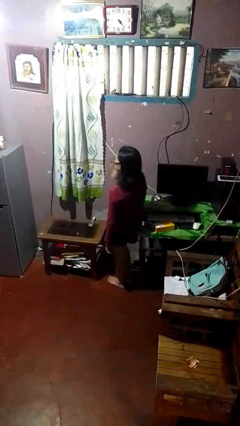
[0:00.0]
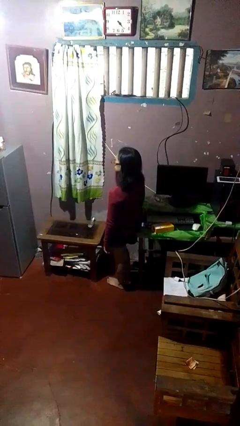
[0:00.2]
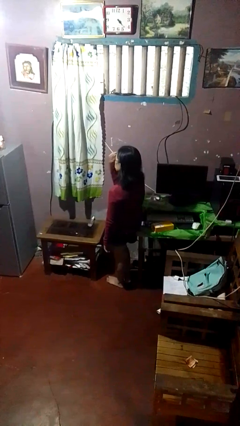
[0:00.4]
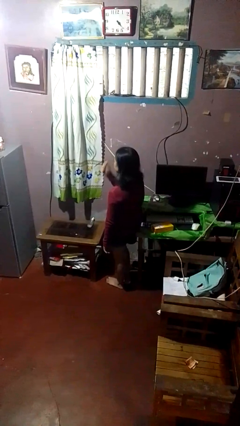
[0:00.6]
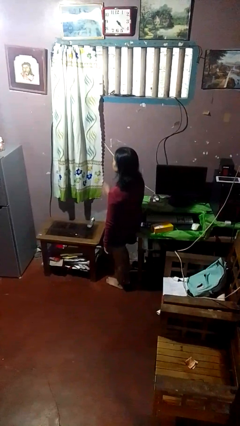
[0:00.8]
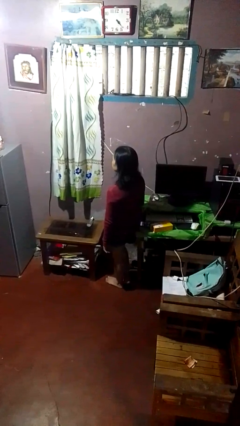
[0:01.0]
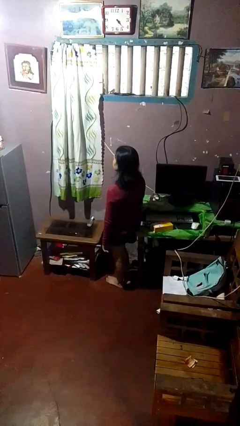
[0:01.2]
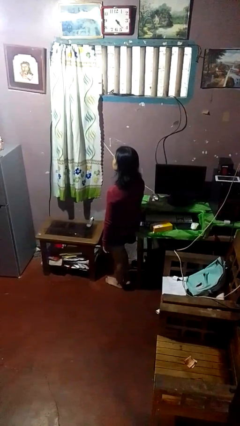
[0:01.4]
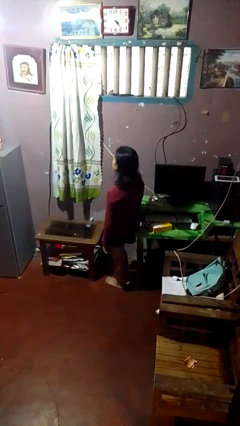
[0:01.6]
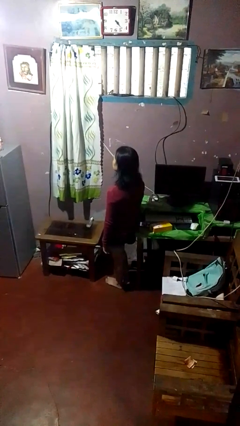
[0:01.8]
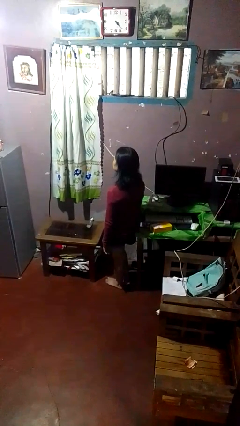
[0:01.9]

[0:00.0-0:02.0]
person takes off glasses

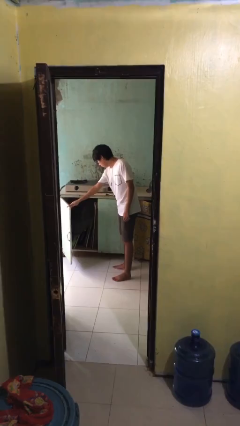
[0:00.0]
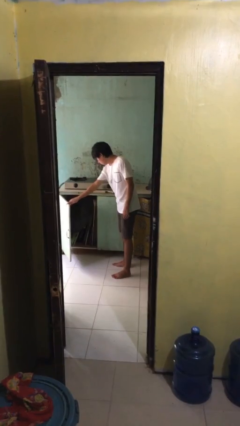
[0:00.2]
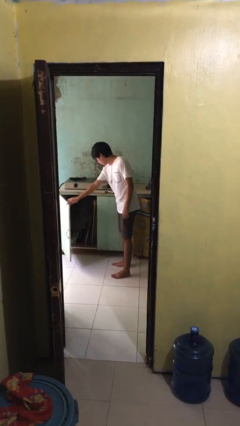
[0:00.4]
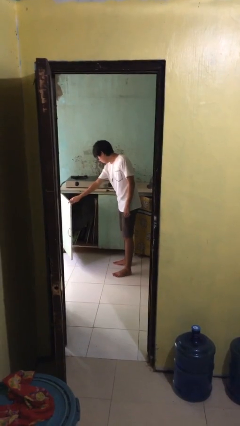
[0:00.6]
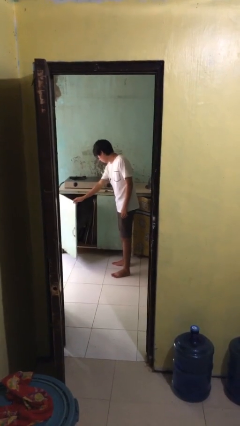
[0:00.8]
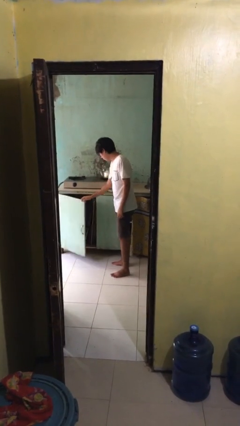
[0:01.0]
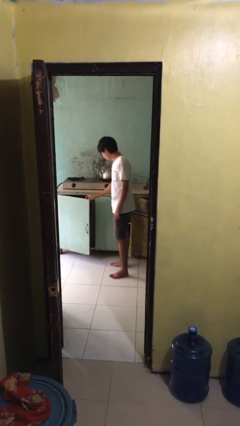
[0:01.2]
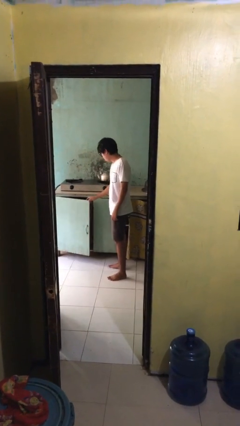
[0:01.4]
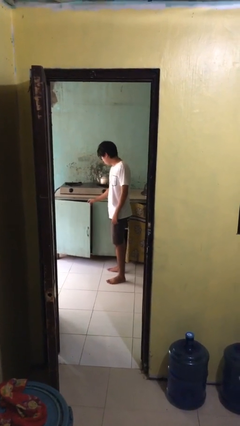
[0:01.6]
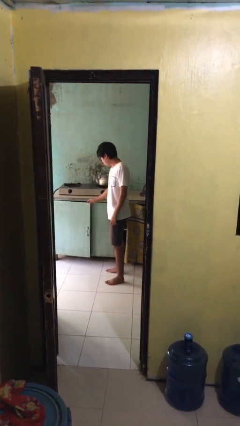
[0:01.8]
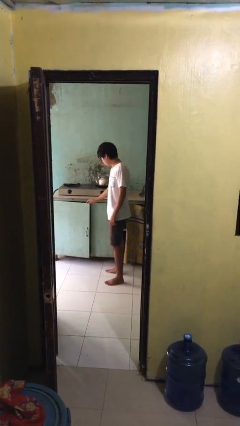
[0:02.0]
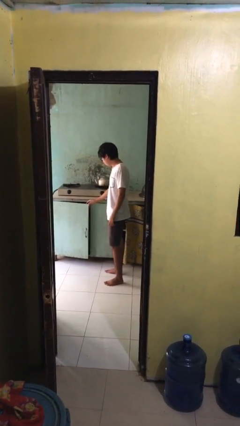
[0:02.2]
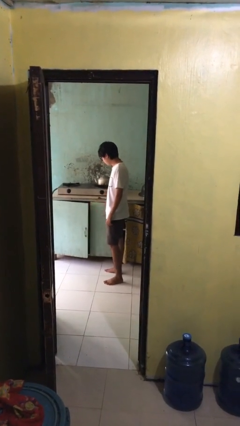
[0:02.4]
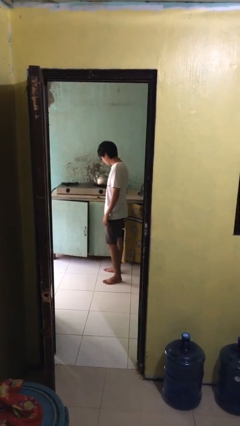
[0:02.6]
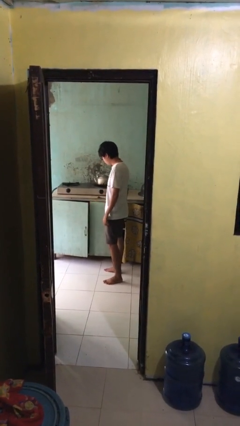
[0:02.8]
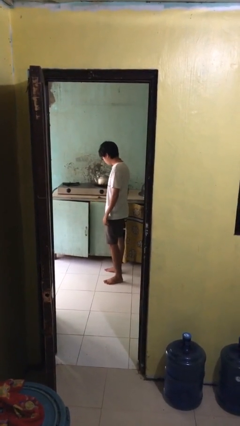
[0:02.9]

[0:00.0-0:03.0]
person closes cabinet

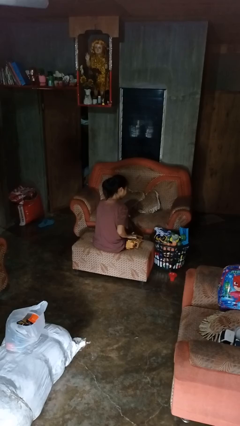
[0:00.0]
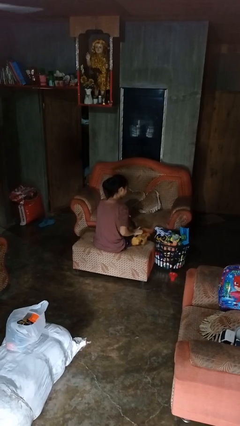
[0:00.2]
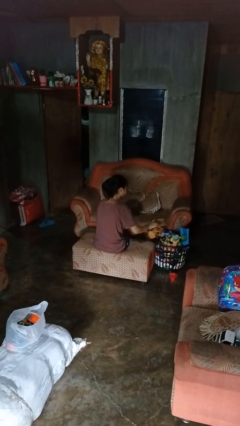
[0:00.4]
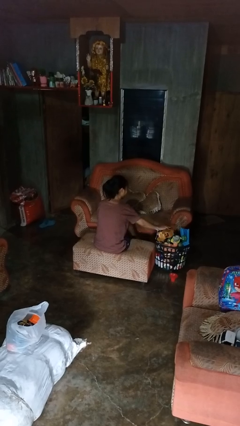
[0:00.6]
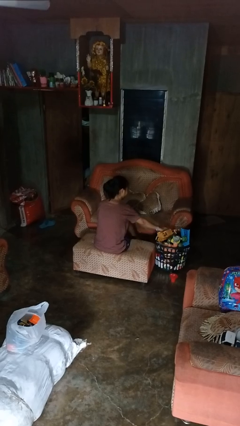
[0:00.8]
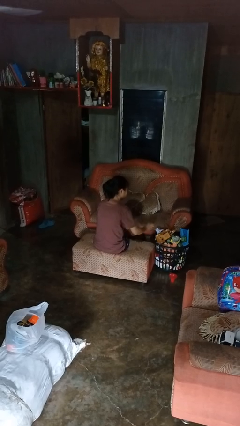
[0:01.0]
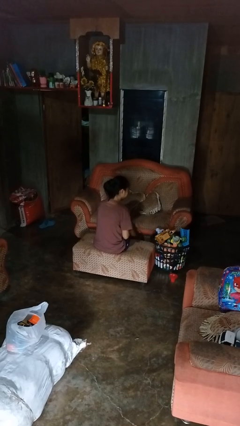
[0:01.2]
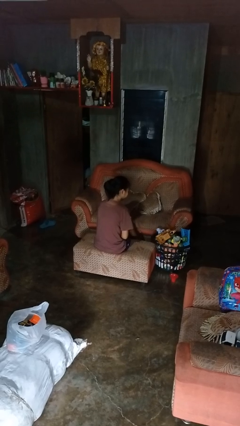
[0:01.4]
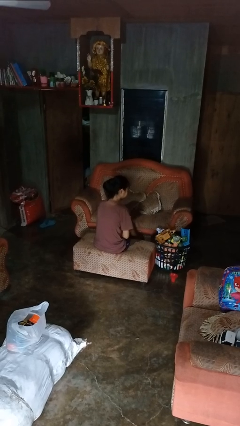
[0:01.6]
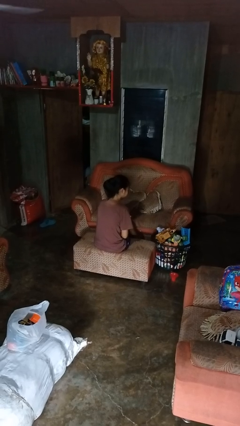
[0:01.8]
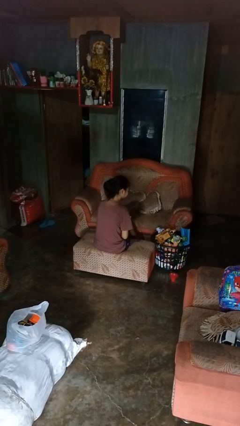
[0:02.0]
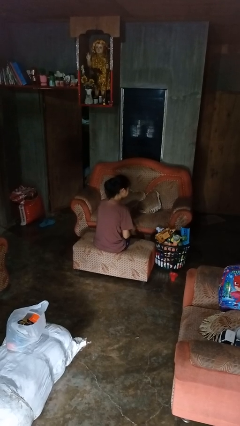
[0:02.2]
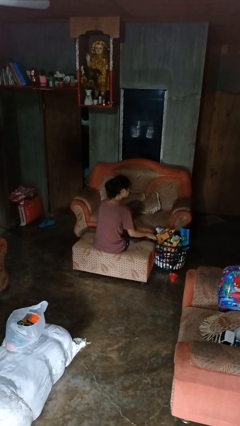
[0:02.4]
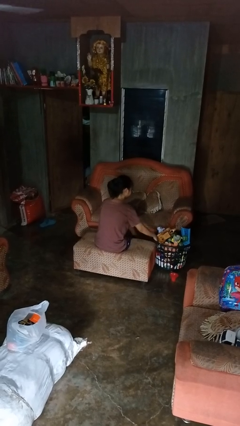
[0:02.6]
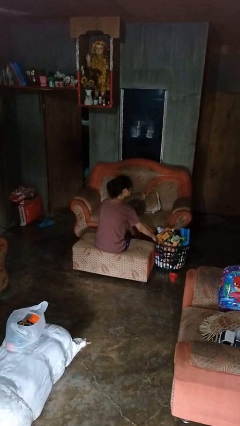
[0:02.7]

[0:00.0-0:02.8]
person puts object into basket

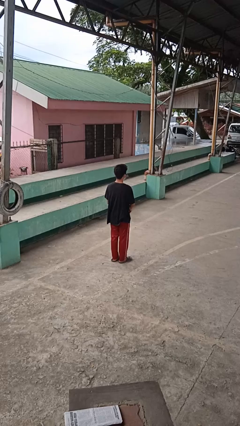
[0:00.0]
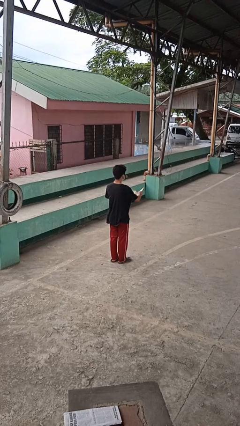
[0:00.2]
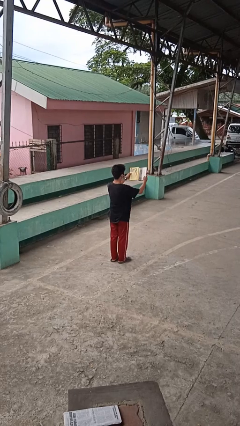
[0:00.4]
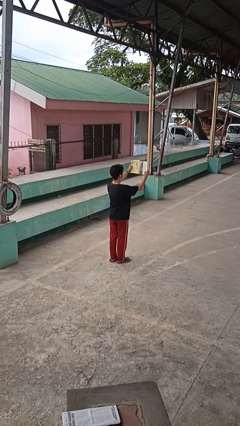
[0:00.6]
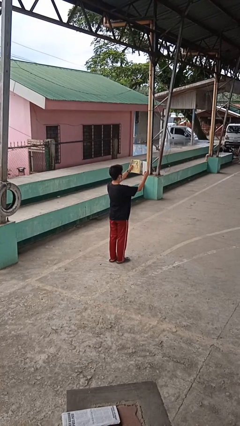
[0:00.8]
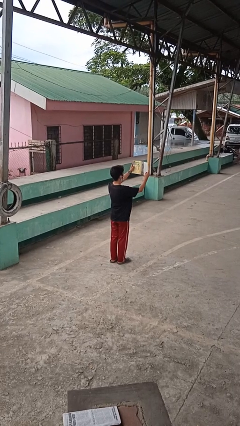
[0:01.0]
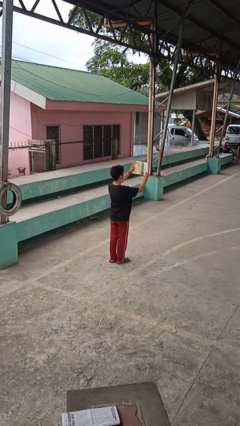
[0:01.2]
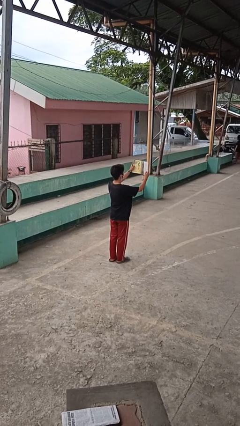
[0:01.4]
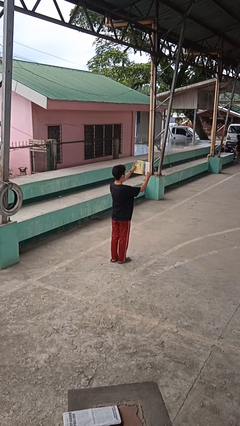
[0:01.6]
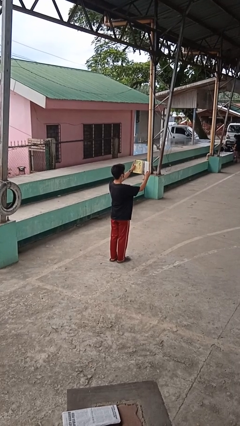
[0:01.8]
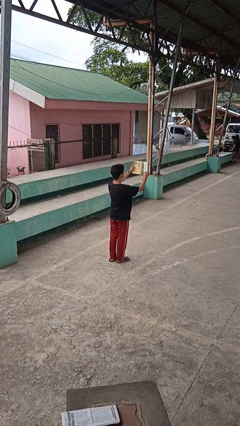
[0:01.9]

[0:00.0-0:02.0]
person reads book

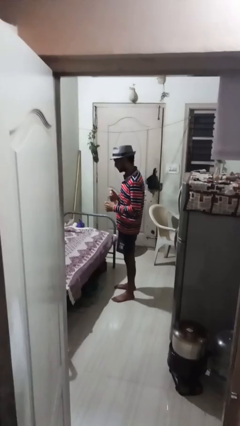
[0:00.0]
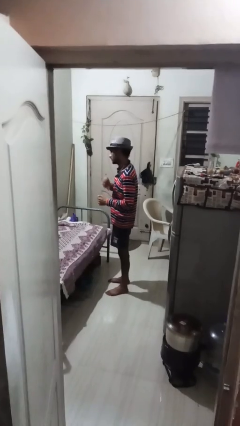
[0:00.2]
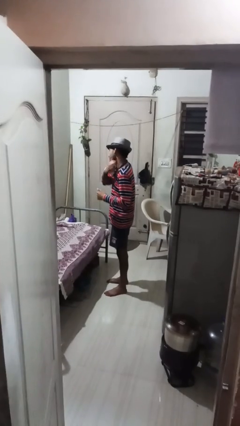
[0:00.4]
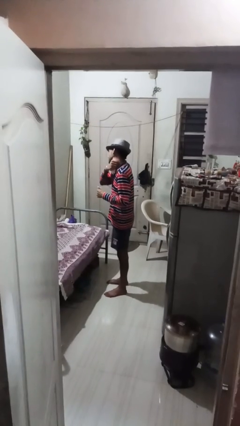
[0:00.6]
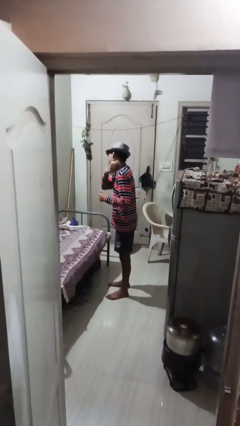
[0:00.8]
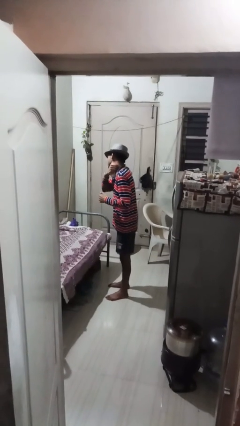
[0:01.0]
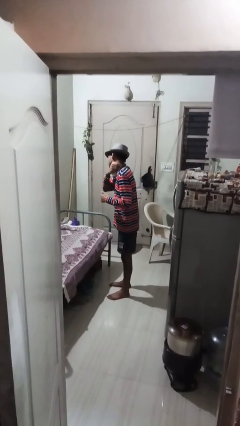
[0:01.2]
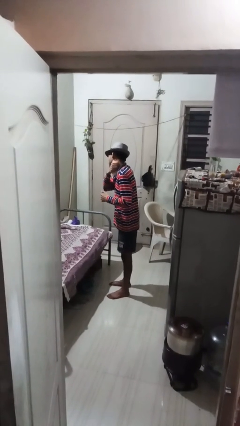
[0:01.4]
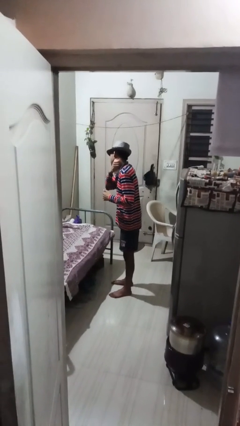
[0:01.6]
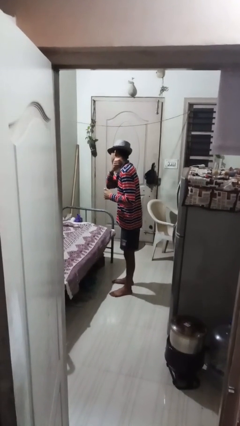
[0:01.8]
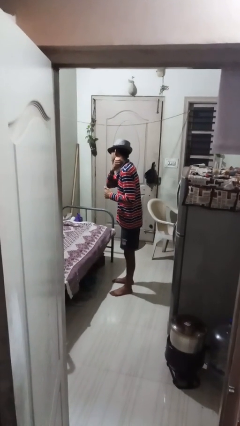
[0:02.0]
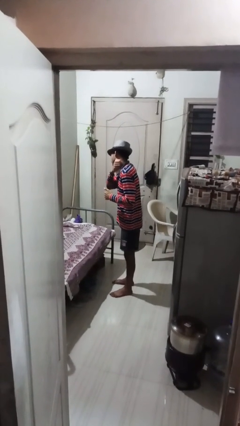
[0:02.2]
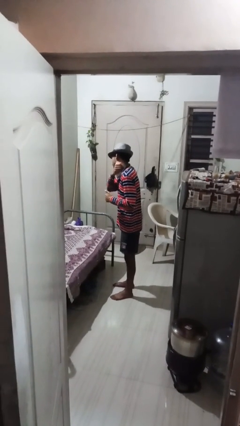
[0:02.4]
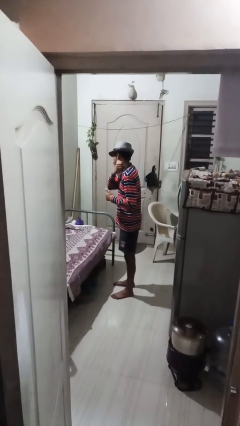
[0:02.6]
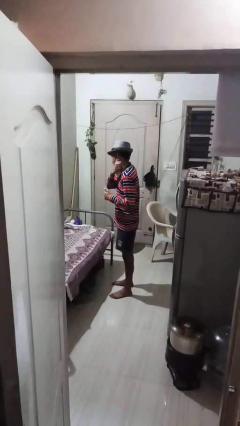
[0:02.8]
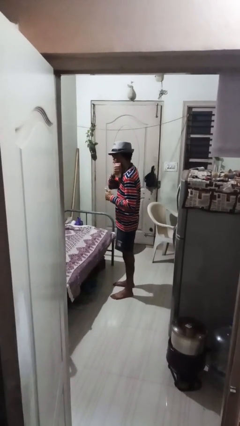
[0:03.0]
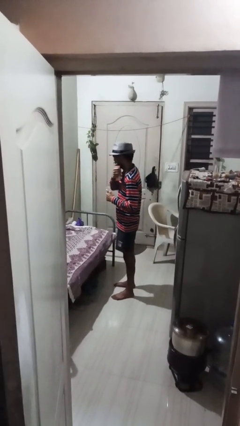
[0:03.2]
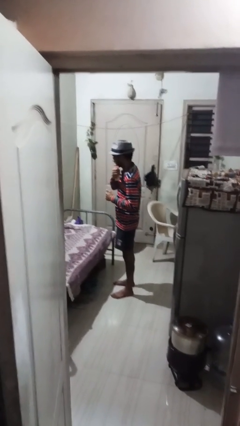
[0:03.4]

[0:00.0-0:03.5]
person applies deodorant

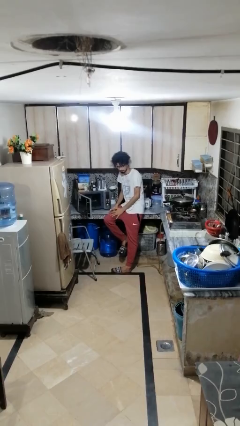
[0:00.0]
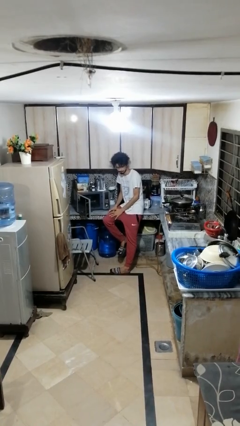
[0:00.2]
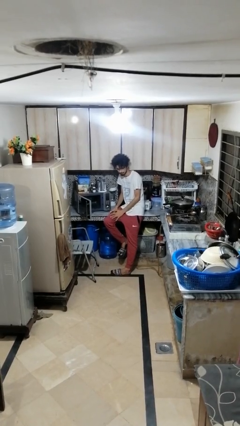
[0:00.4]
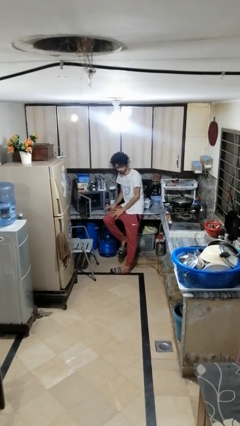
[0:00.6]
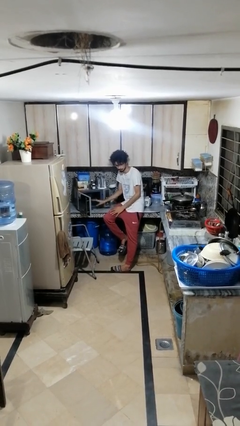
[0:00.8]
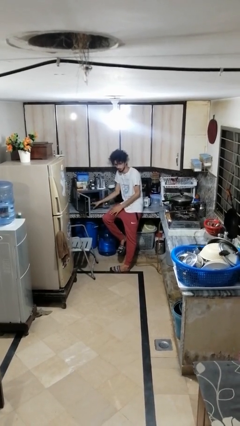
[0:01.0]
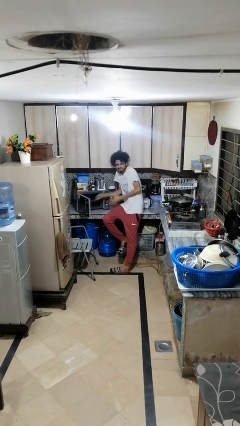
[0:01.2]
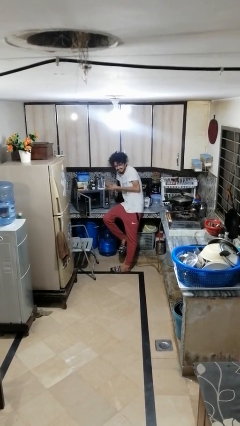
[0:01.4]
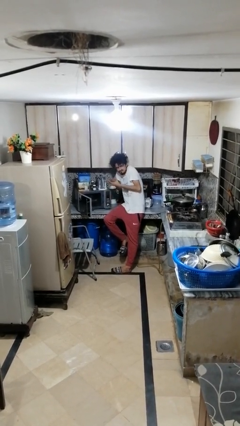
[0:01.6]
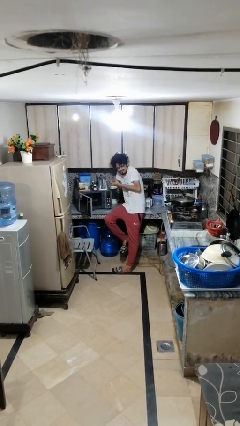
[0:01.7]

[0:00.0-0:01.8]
person burns hand

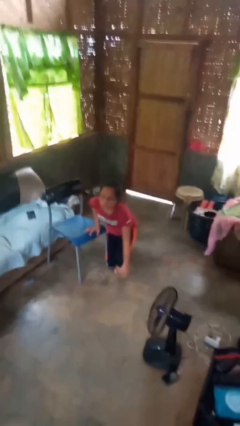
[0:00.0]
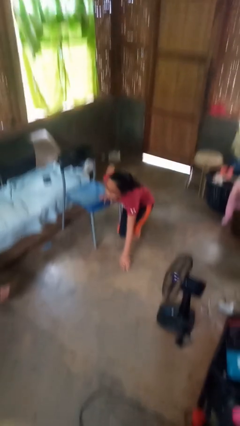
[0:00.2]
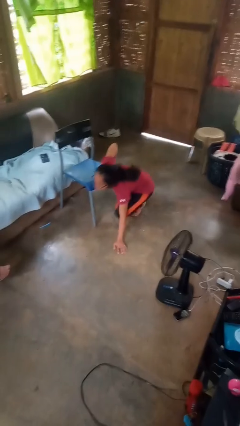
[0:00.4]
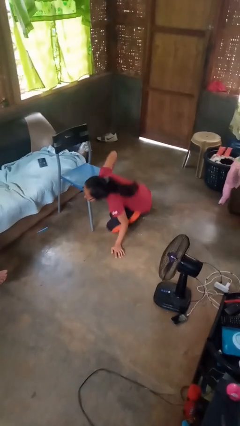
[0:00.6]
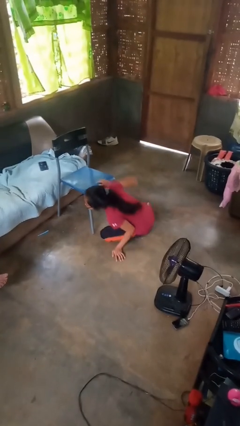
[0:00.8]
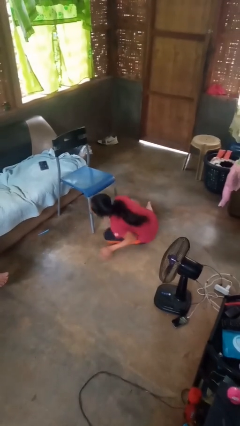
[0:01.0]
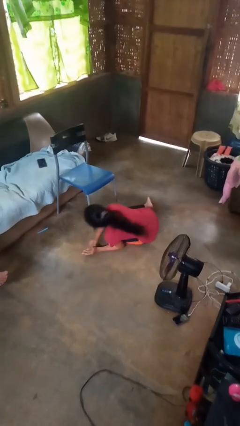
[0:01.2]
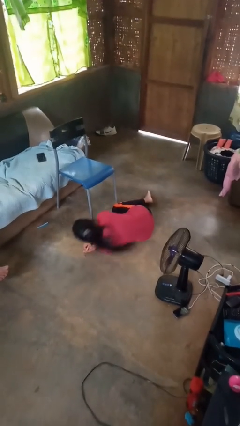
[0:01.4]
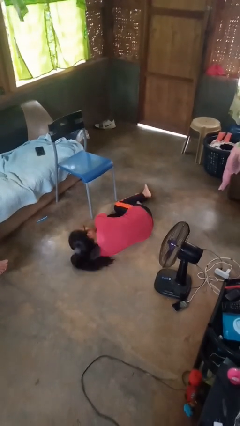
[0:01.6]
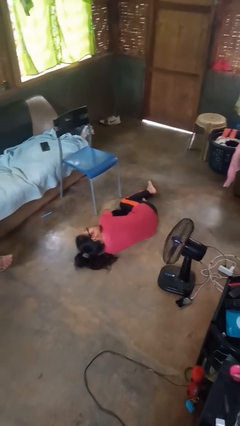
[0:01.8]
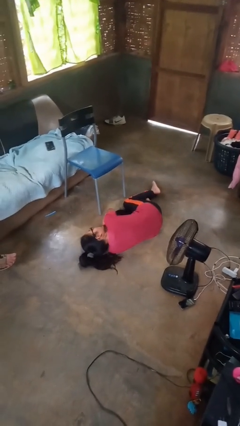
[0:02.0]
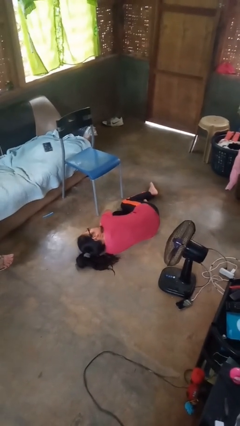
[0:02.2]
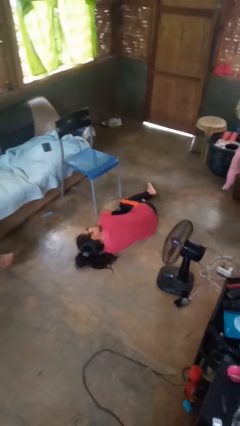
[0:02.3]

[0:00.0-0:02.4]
person lies down on floor
